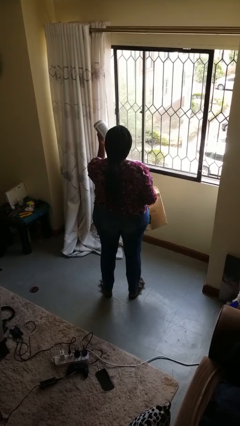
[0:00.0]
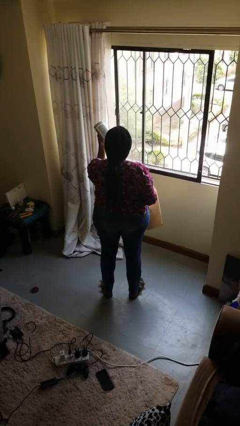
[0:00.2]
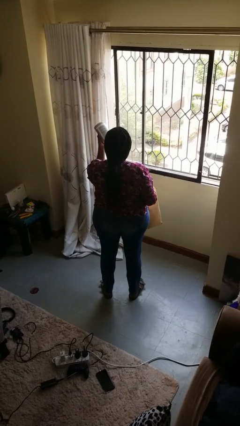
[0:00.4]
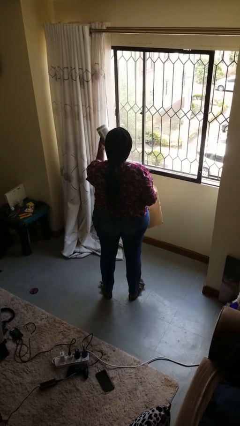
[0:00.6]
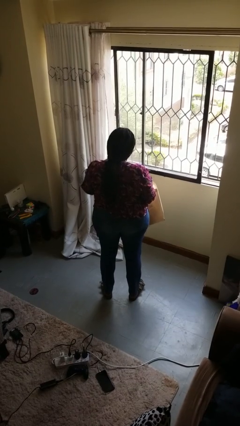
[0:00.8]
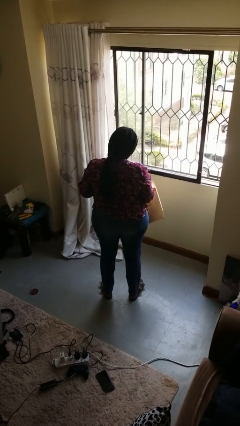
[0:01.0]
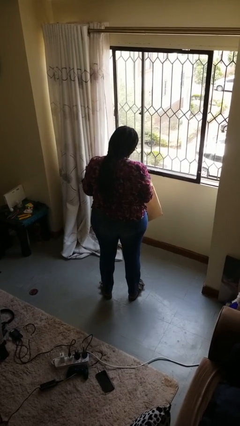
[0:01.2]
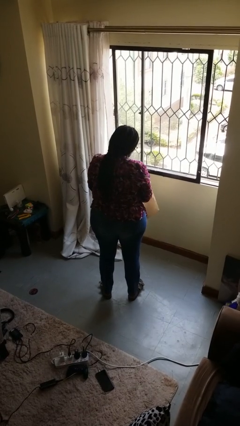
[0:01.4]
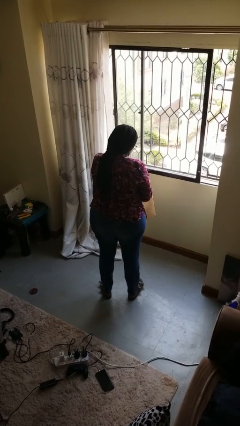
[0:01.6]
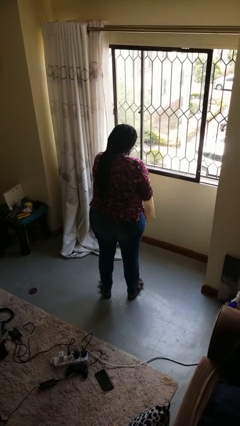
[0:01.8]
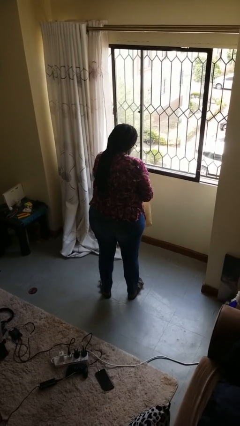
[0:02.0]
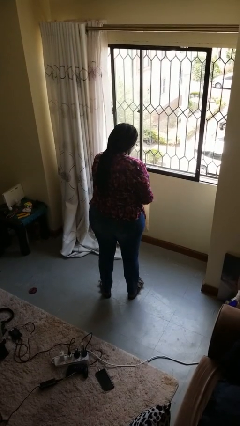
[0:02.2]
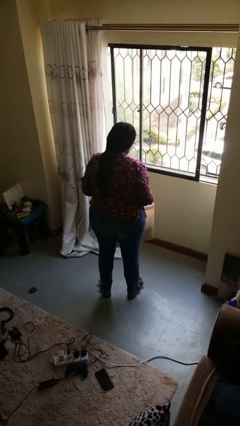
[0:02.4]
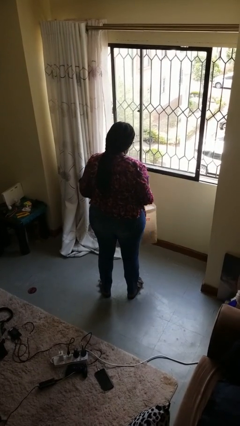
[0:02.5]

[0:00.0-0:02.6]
person puts object into bag

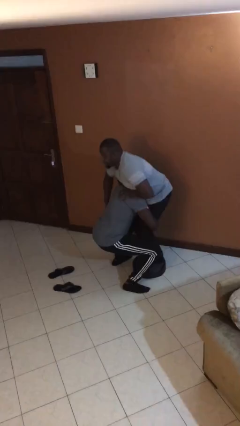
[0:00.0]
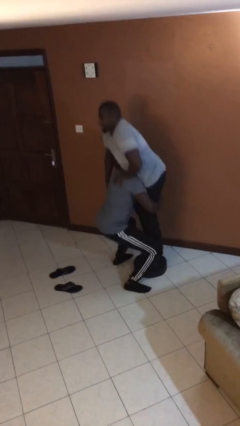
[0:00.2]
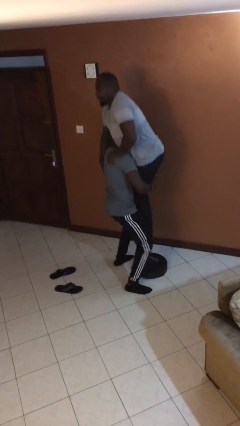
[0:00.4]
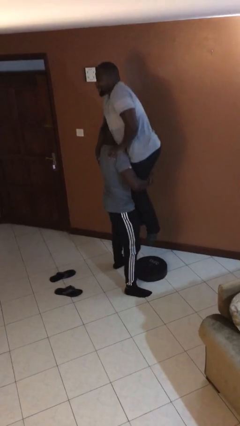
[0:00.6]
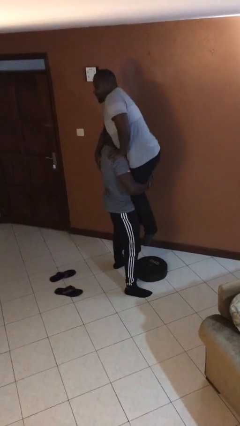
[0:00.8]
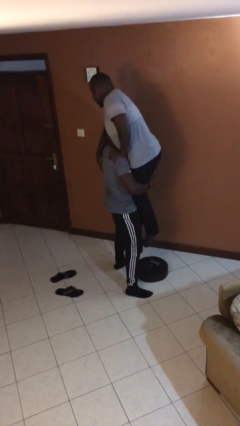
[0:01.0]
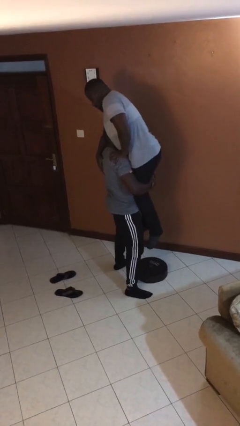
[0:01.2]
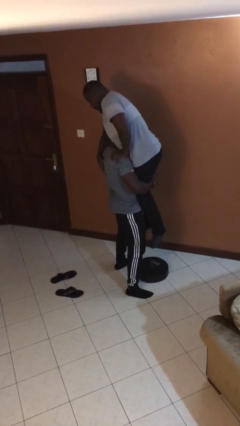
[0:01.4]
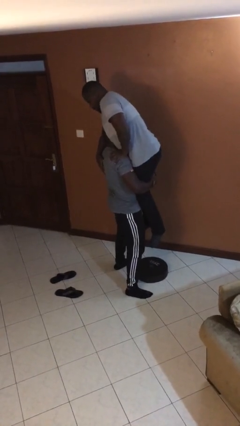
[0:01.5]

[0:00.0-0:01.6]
person picks up person

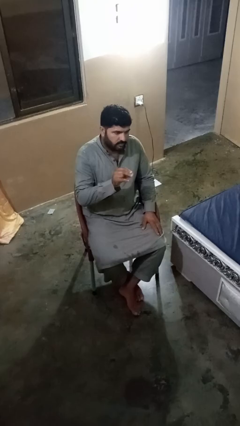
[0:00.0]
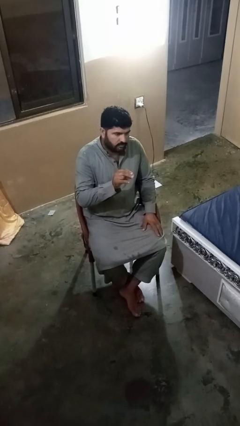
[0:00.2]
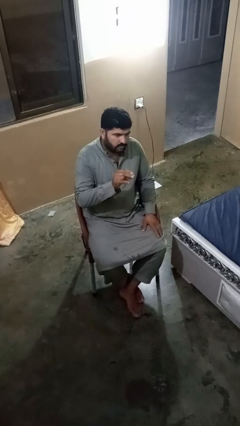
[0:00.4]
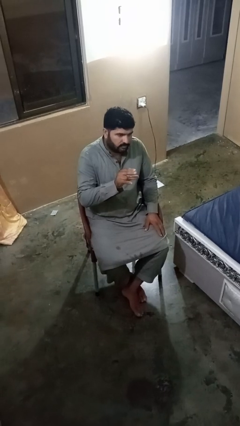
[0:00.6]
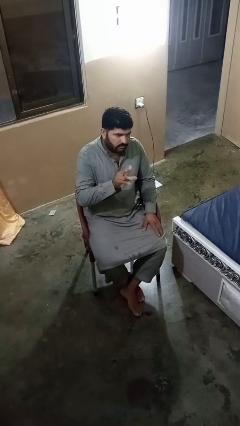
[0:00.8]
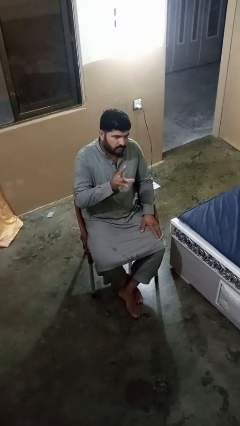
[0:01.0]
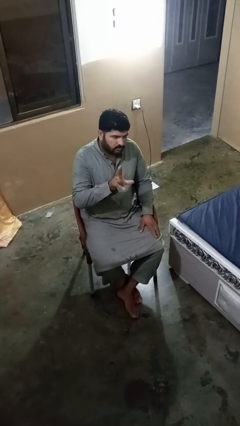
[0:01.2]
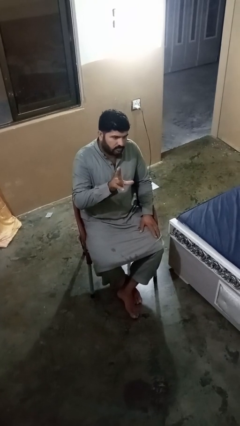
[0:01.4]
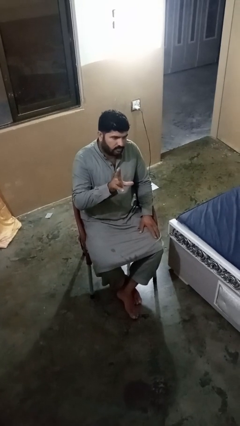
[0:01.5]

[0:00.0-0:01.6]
person gestures zoom out

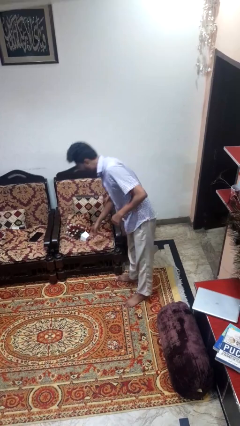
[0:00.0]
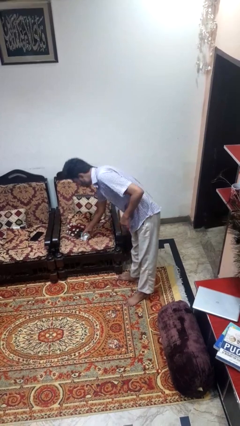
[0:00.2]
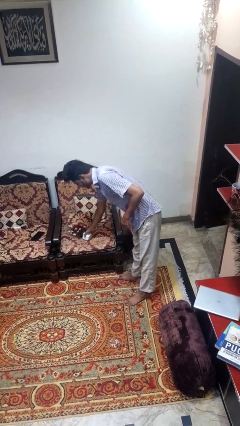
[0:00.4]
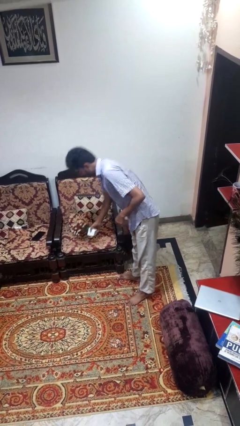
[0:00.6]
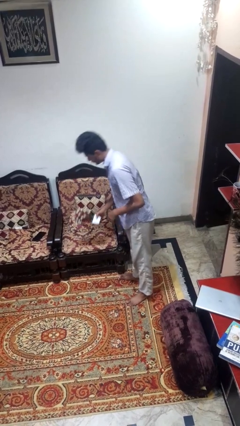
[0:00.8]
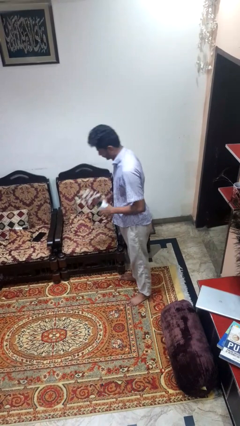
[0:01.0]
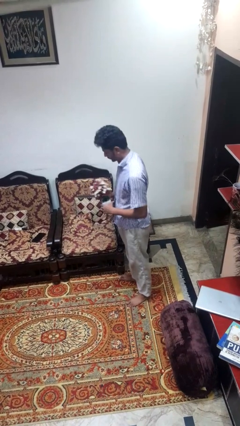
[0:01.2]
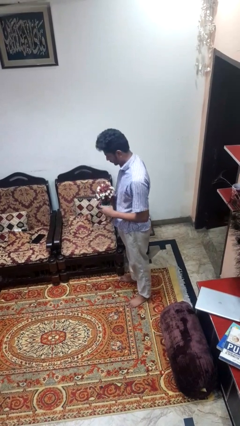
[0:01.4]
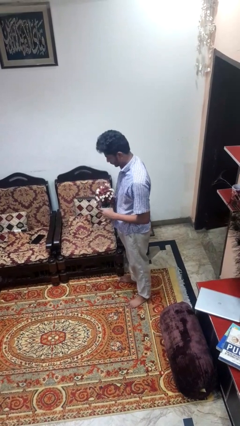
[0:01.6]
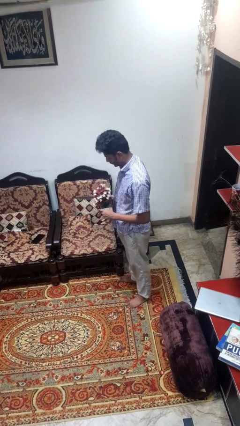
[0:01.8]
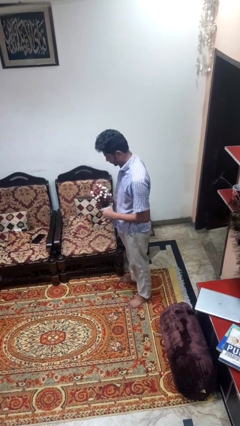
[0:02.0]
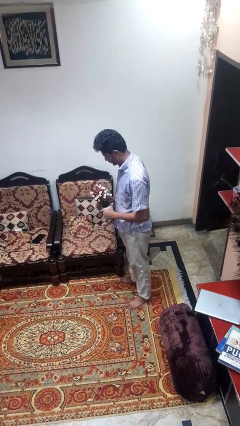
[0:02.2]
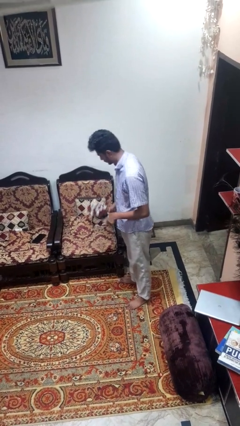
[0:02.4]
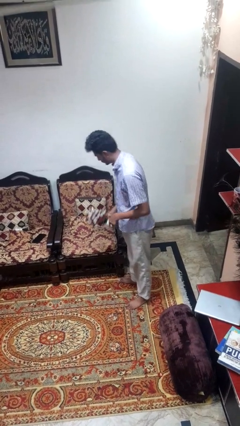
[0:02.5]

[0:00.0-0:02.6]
person picks up object from couch

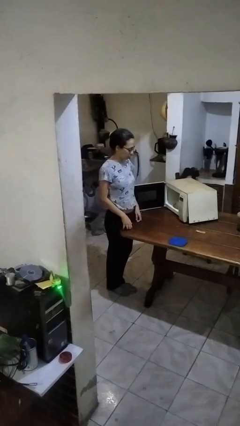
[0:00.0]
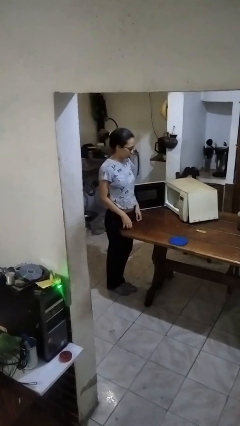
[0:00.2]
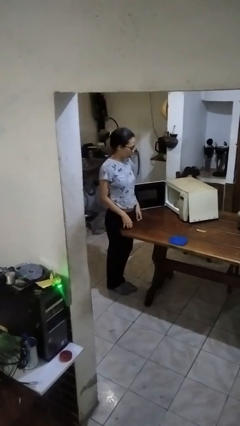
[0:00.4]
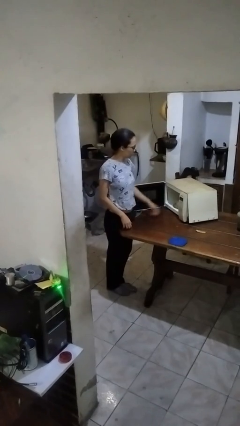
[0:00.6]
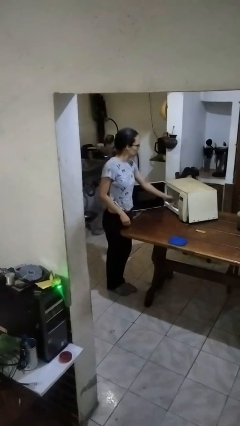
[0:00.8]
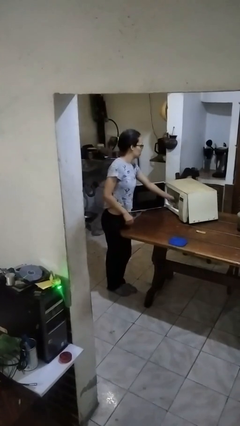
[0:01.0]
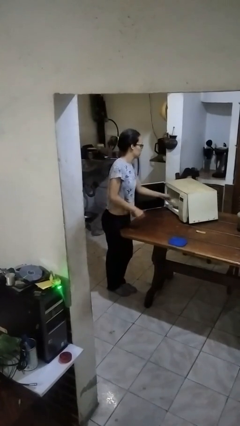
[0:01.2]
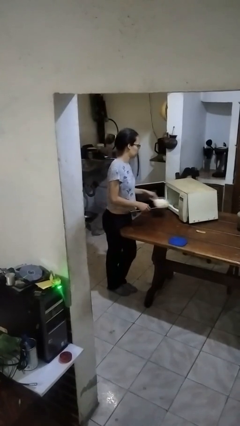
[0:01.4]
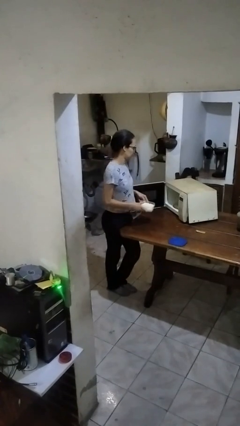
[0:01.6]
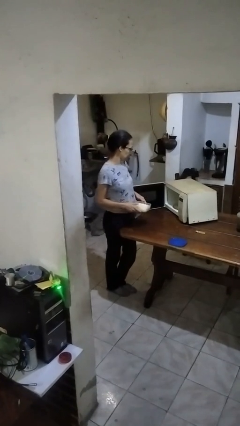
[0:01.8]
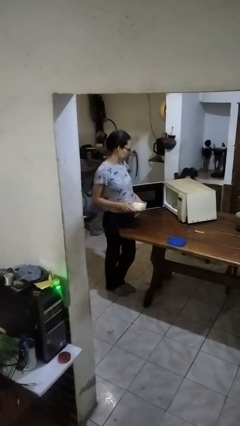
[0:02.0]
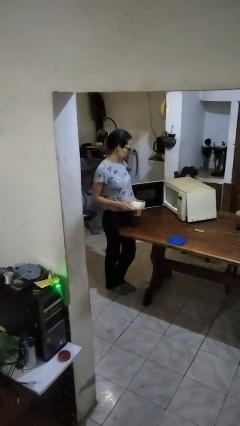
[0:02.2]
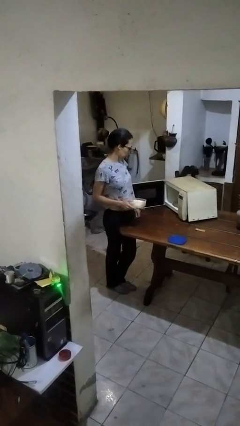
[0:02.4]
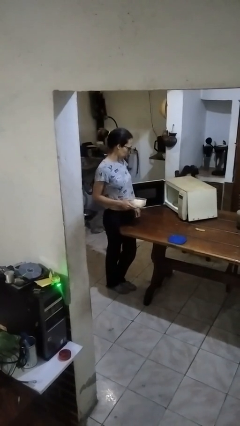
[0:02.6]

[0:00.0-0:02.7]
person takes object from microwave

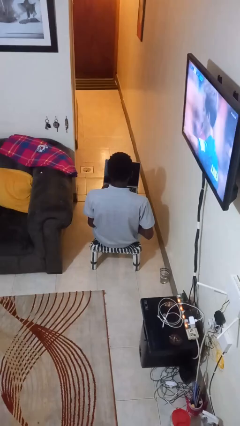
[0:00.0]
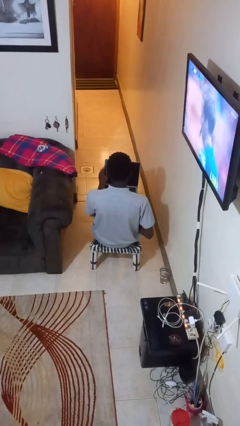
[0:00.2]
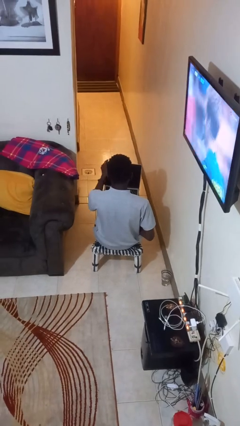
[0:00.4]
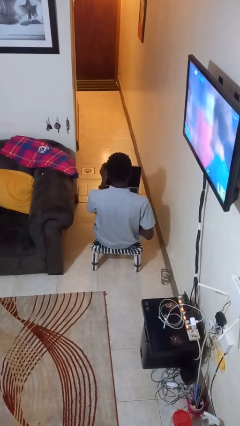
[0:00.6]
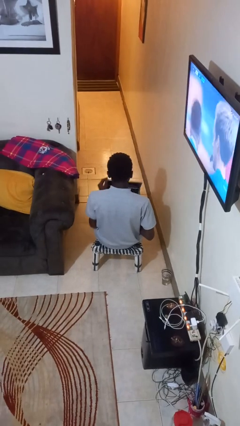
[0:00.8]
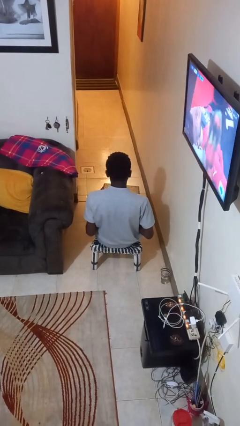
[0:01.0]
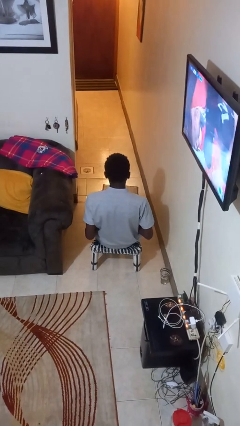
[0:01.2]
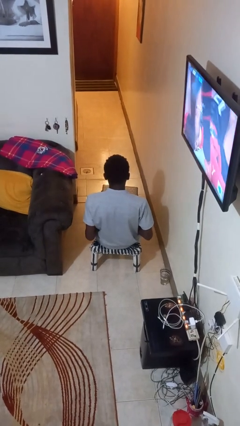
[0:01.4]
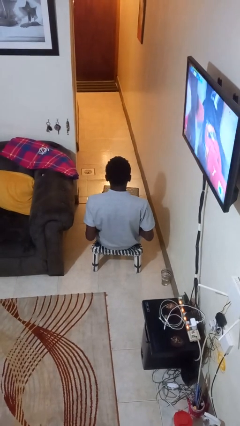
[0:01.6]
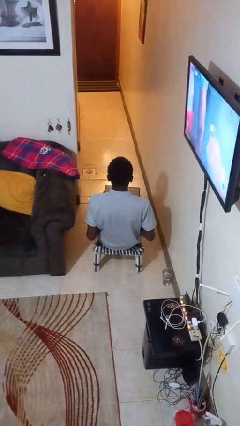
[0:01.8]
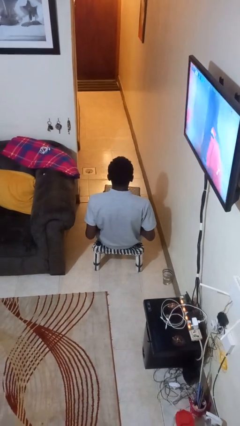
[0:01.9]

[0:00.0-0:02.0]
person closes laptop

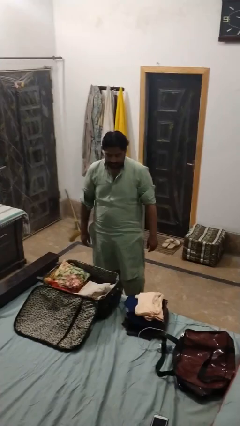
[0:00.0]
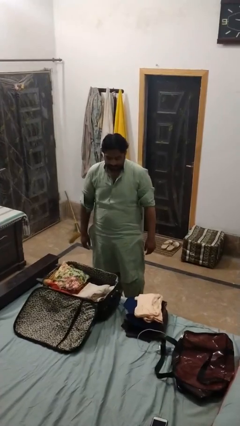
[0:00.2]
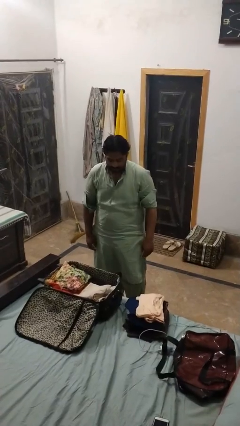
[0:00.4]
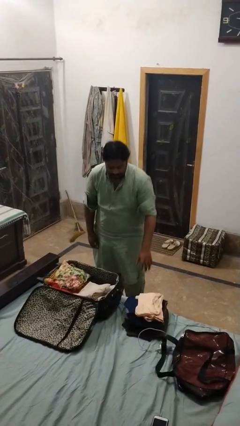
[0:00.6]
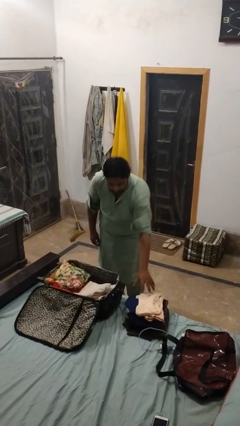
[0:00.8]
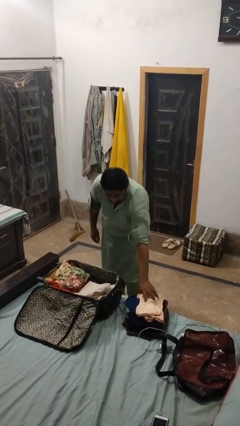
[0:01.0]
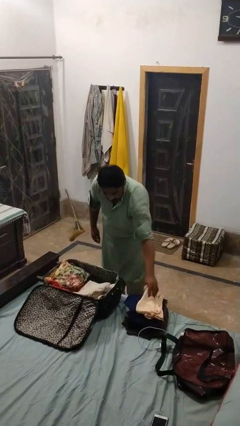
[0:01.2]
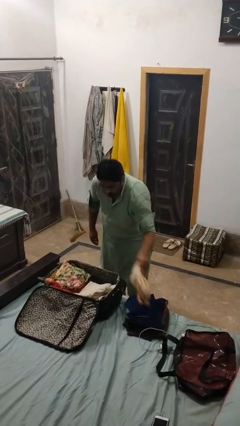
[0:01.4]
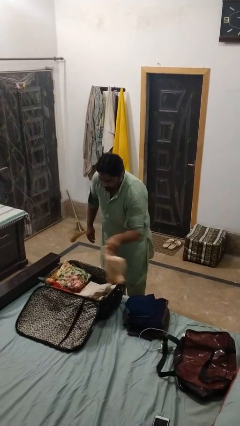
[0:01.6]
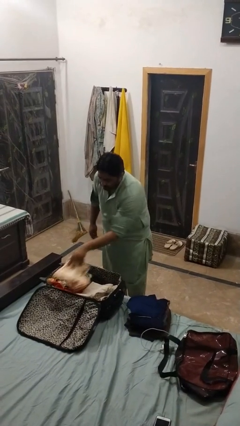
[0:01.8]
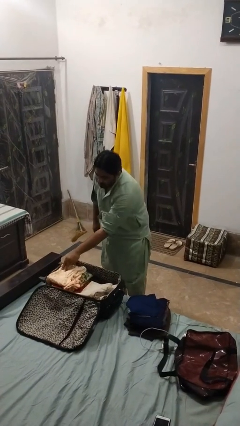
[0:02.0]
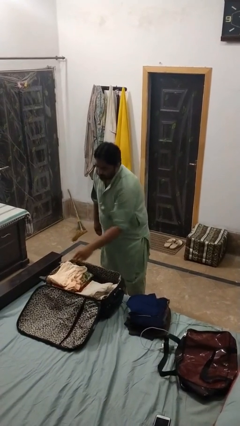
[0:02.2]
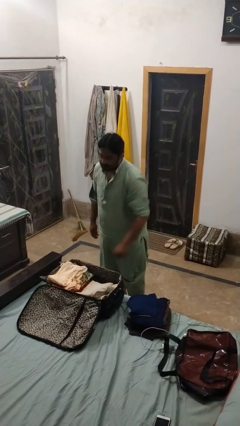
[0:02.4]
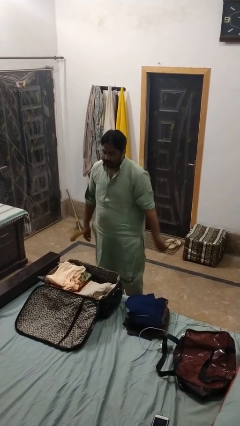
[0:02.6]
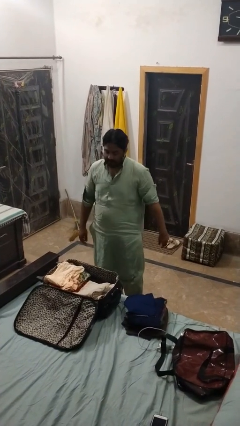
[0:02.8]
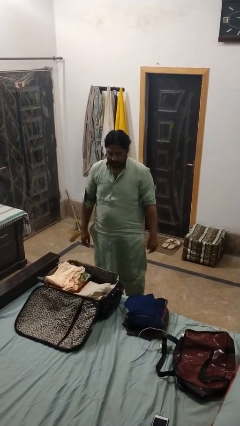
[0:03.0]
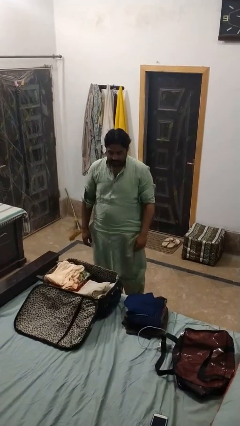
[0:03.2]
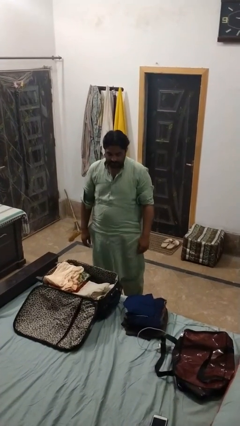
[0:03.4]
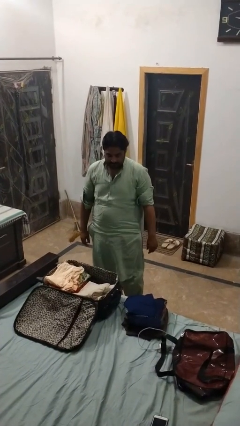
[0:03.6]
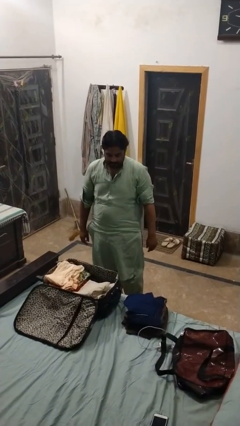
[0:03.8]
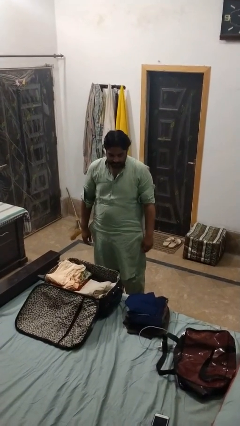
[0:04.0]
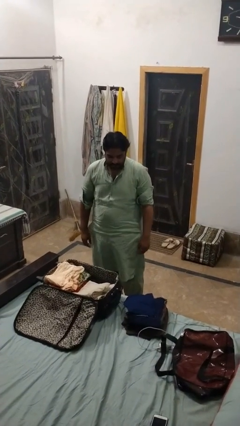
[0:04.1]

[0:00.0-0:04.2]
person loads clothes into suitcase
